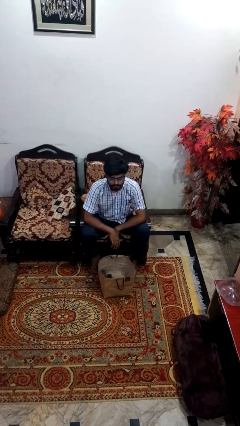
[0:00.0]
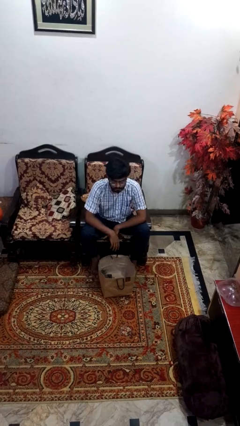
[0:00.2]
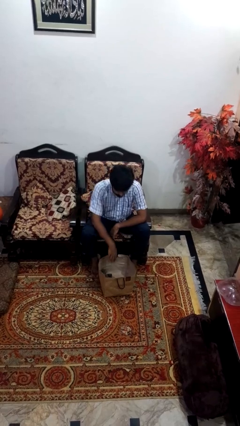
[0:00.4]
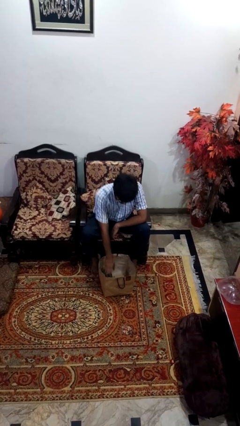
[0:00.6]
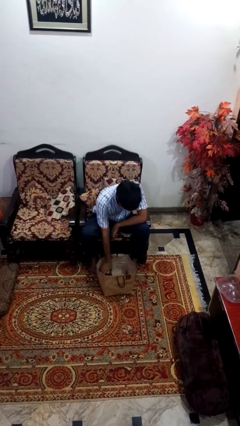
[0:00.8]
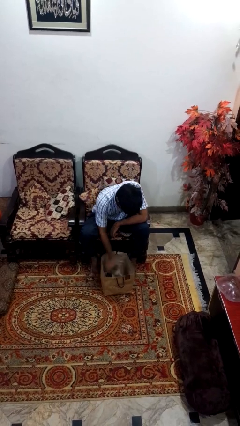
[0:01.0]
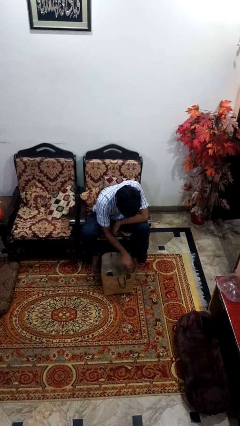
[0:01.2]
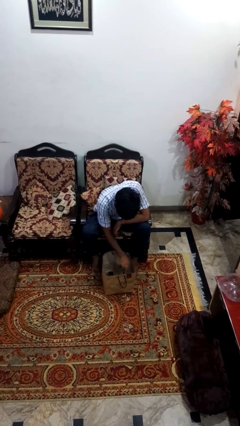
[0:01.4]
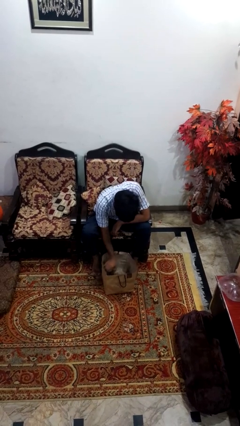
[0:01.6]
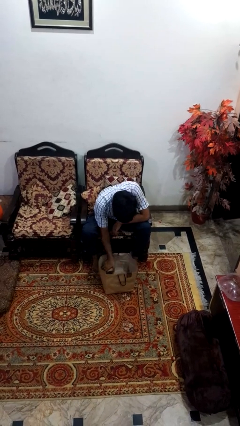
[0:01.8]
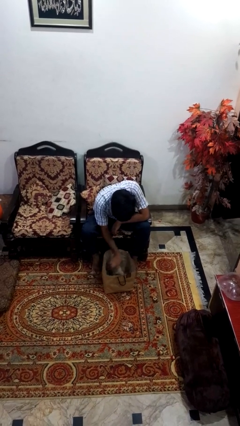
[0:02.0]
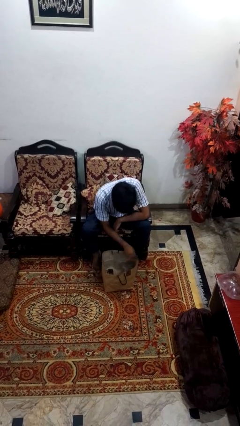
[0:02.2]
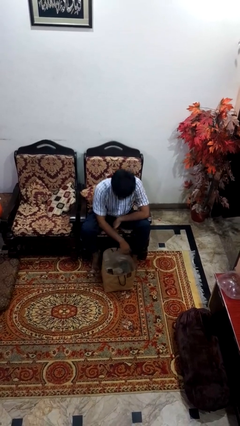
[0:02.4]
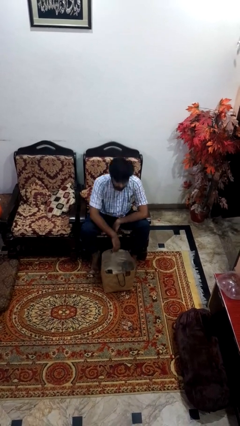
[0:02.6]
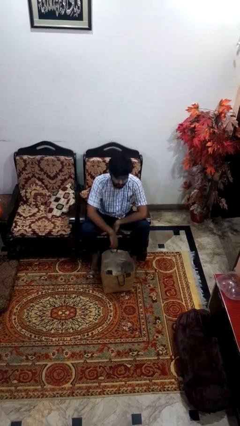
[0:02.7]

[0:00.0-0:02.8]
person searches in bag

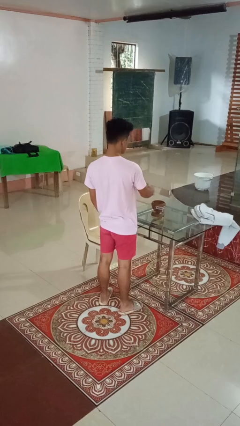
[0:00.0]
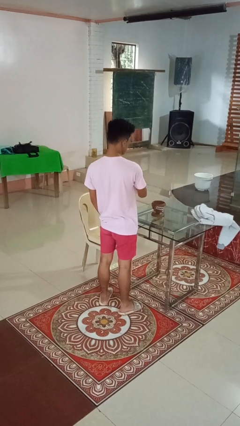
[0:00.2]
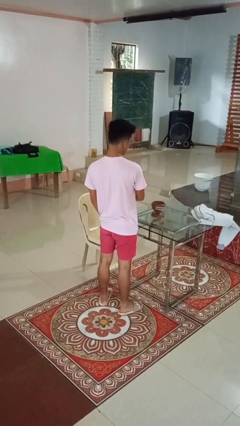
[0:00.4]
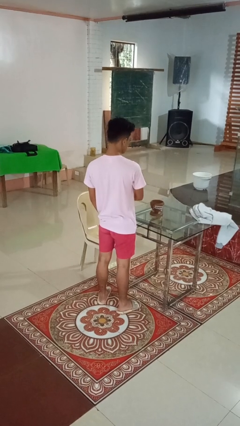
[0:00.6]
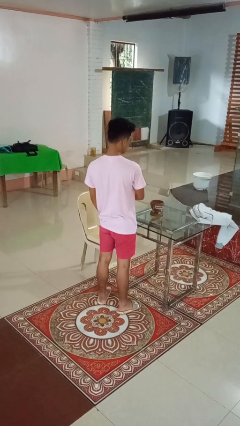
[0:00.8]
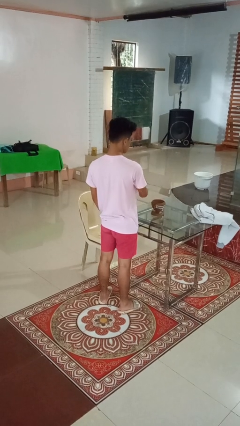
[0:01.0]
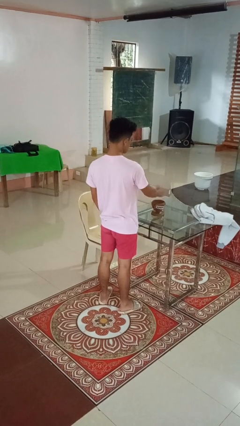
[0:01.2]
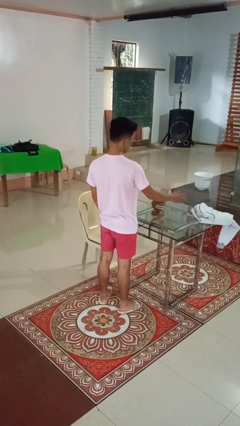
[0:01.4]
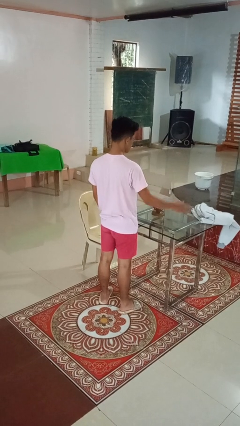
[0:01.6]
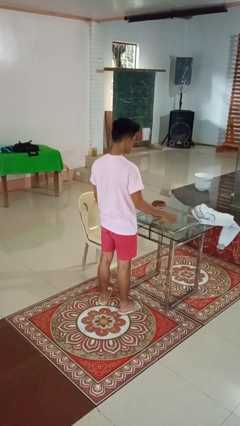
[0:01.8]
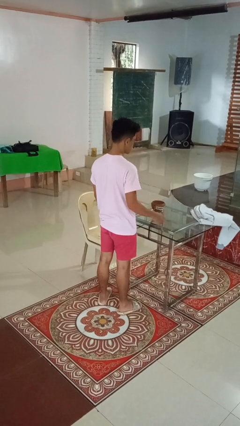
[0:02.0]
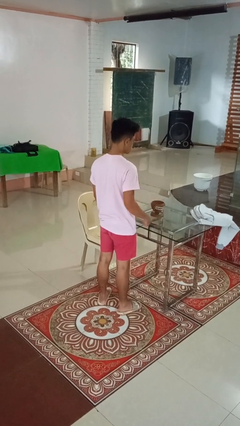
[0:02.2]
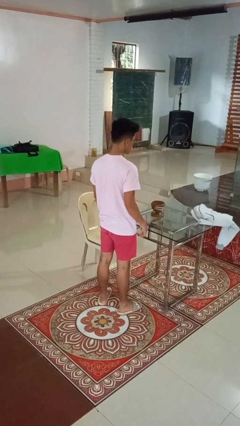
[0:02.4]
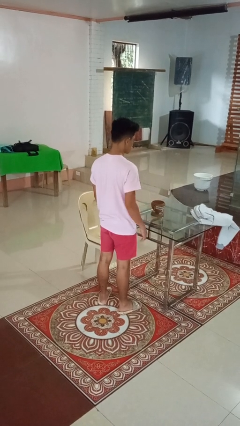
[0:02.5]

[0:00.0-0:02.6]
person waves hand over object

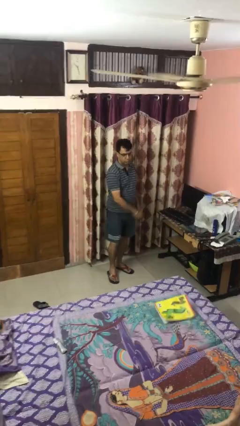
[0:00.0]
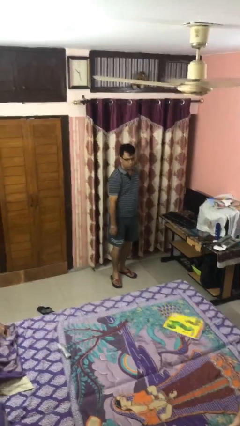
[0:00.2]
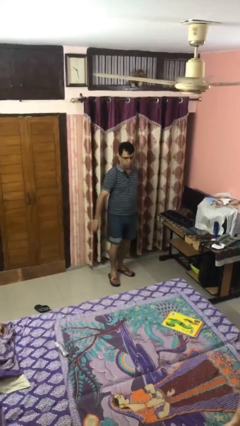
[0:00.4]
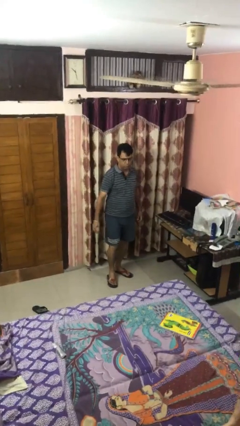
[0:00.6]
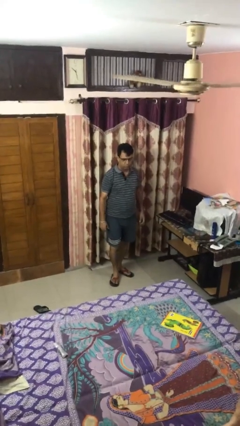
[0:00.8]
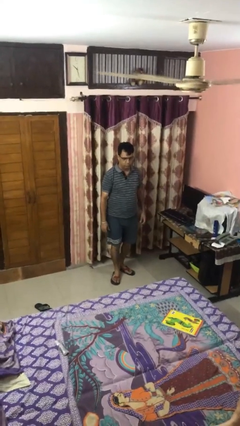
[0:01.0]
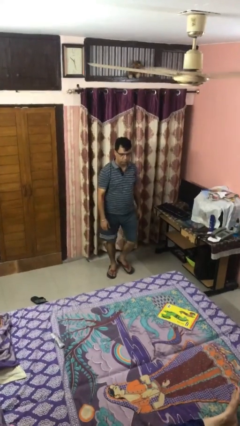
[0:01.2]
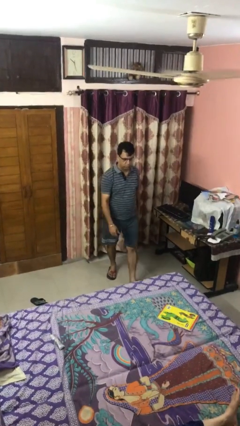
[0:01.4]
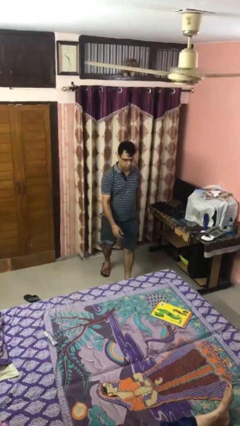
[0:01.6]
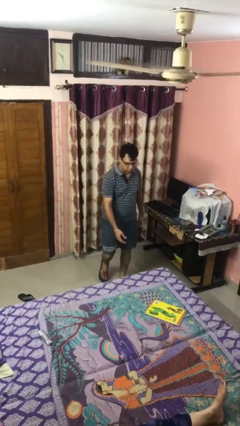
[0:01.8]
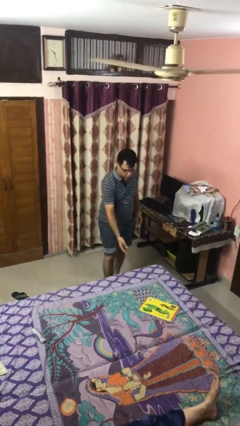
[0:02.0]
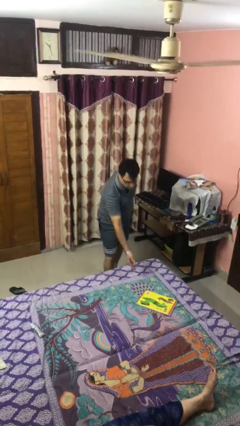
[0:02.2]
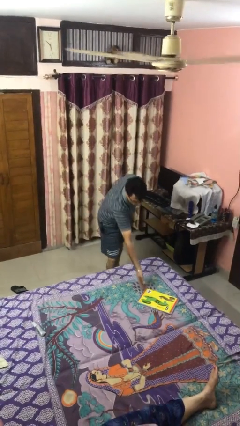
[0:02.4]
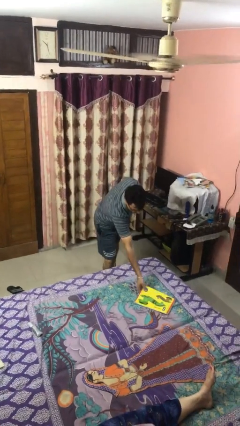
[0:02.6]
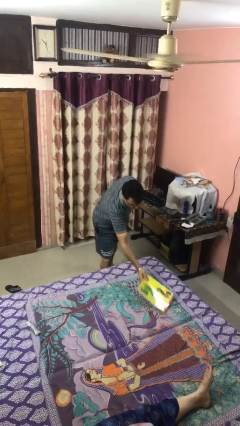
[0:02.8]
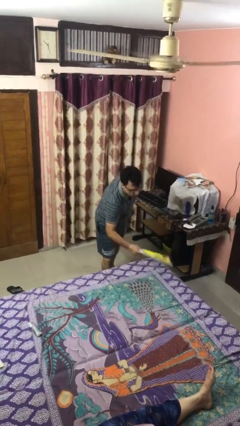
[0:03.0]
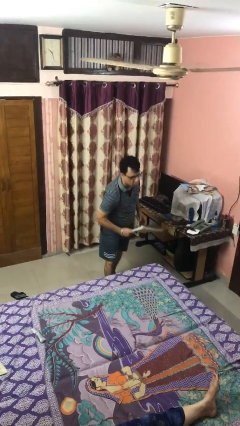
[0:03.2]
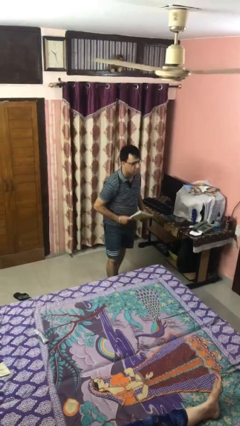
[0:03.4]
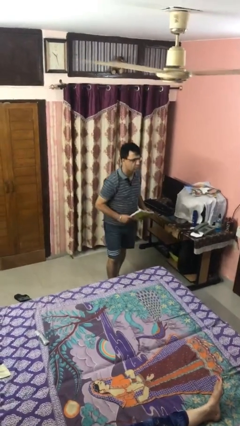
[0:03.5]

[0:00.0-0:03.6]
person picks up object from bed

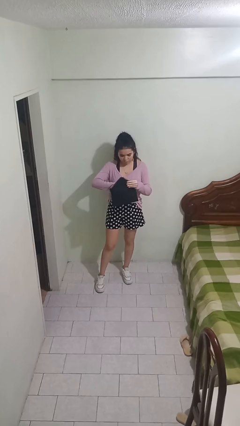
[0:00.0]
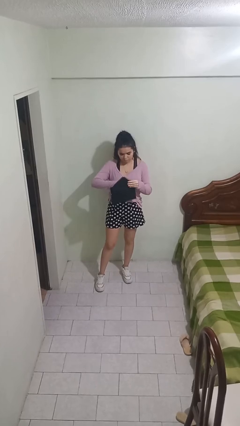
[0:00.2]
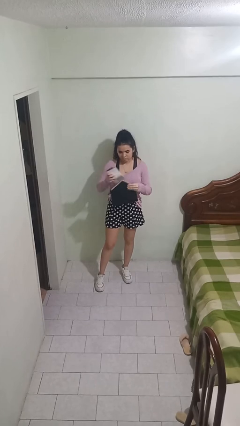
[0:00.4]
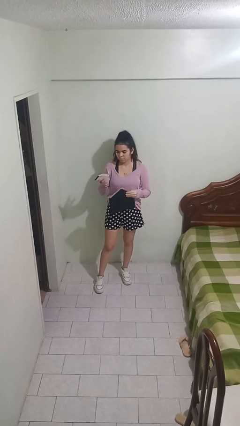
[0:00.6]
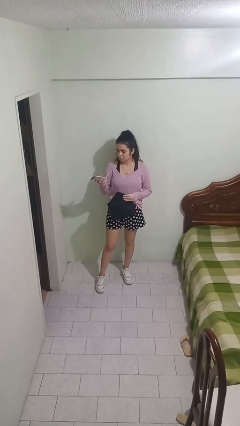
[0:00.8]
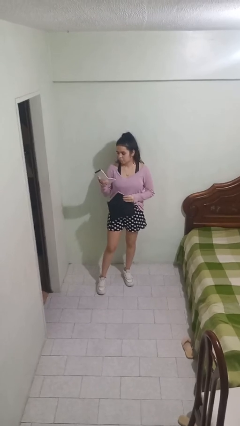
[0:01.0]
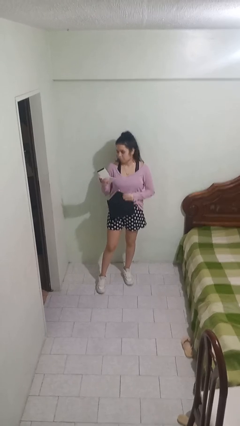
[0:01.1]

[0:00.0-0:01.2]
person takes object from purse

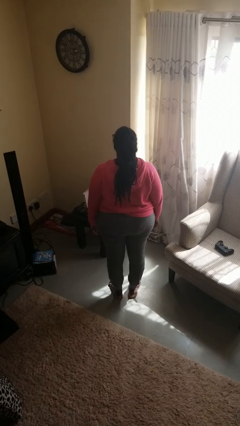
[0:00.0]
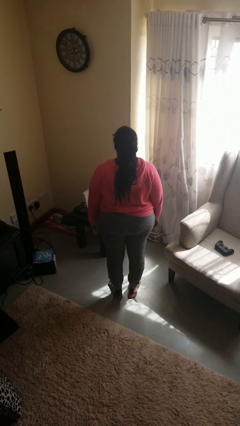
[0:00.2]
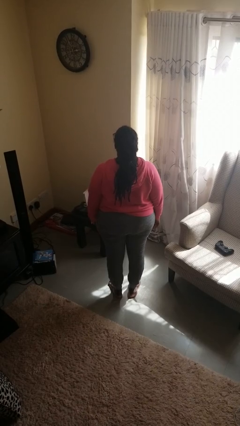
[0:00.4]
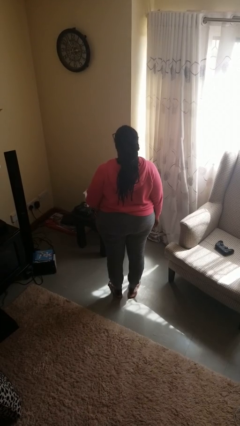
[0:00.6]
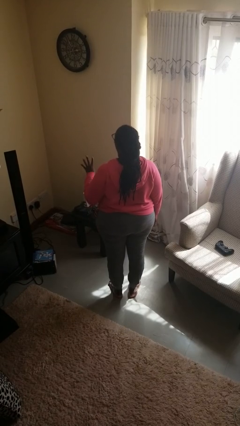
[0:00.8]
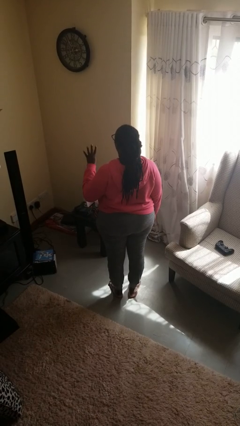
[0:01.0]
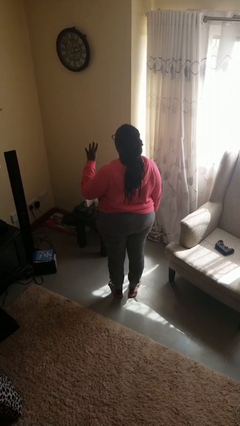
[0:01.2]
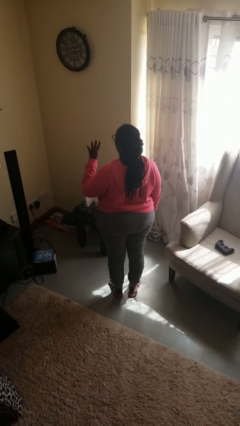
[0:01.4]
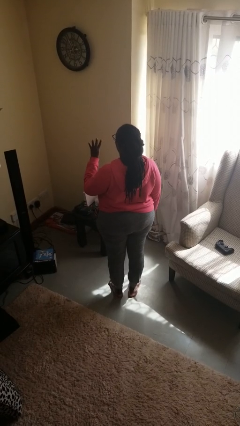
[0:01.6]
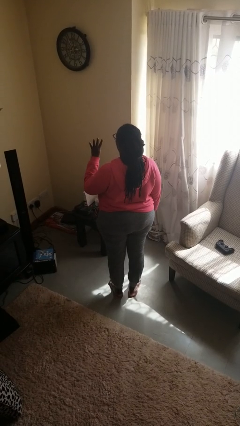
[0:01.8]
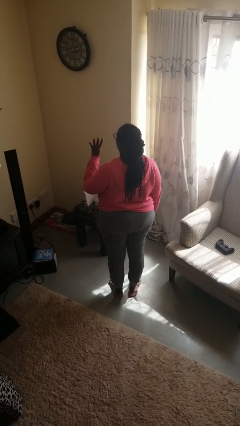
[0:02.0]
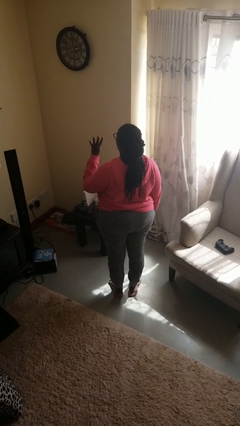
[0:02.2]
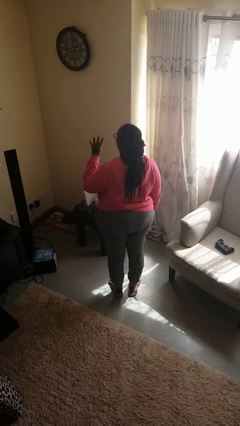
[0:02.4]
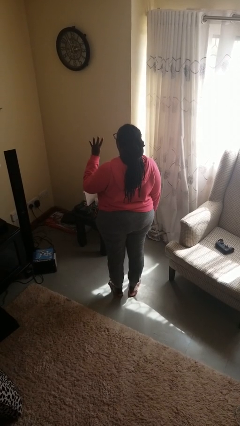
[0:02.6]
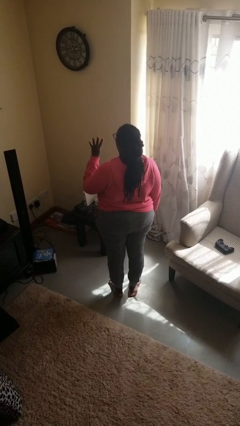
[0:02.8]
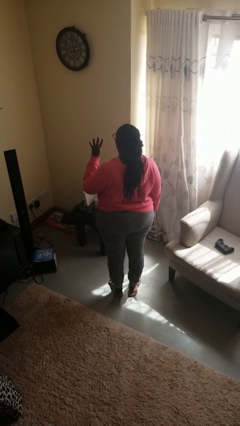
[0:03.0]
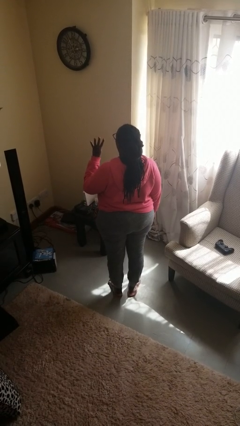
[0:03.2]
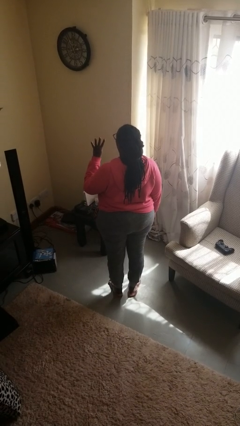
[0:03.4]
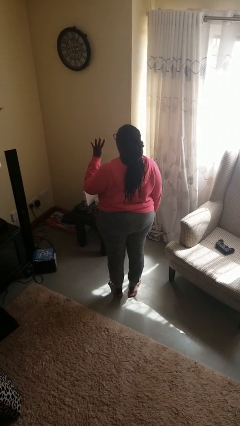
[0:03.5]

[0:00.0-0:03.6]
person gestures number four

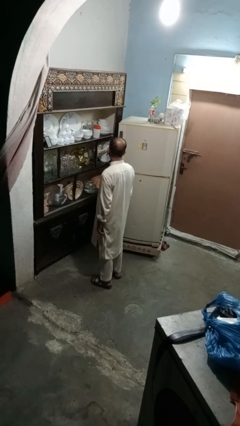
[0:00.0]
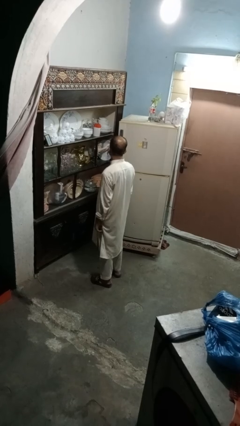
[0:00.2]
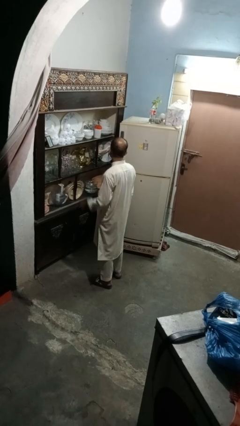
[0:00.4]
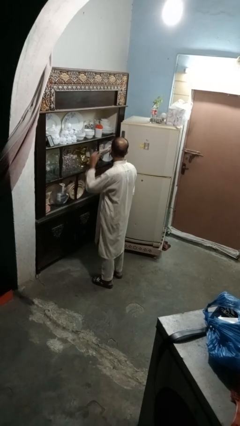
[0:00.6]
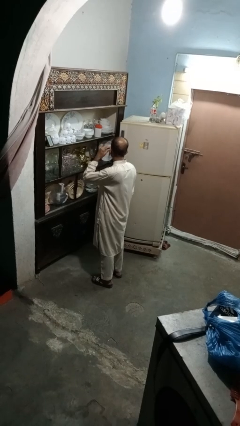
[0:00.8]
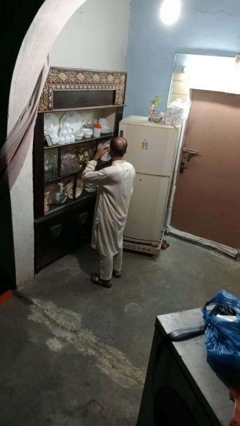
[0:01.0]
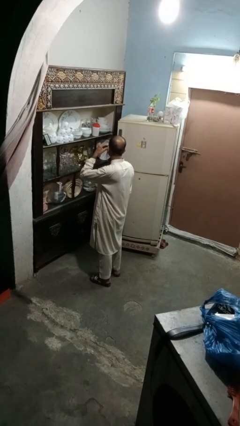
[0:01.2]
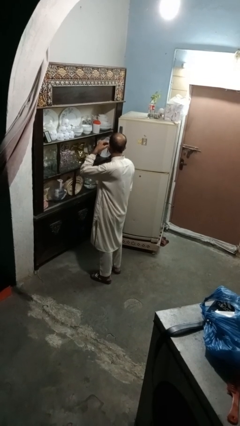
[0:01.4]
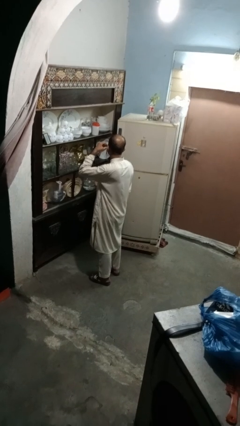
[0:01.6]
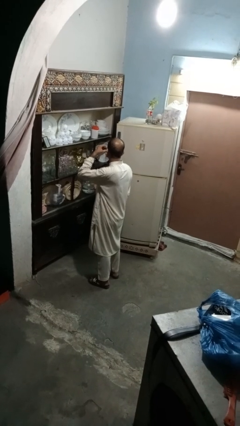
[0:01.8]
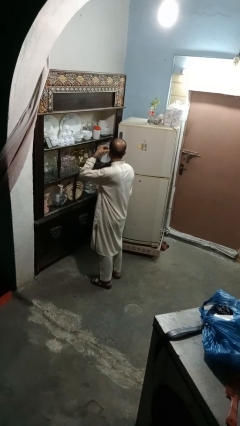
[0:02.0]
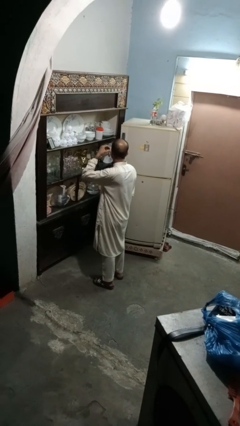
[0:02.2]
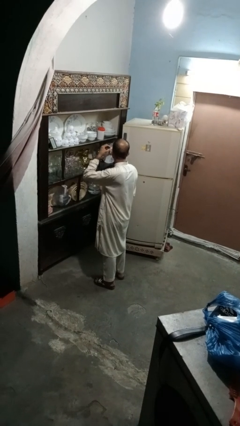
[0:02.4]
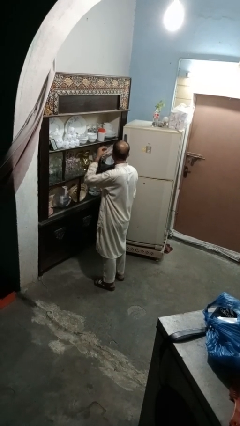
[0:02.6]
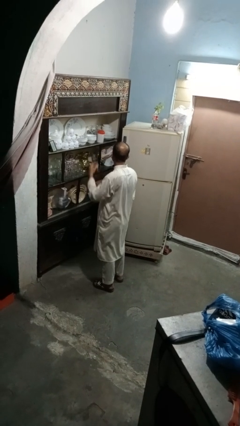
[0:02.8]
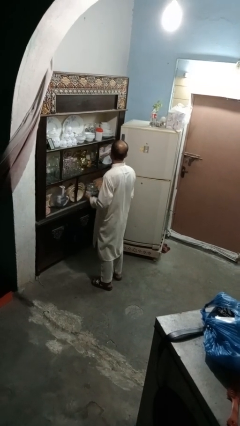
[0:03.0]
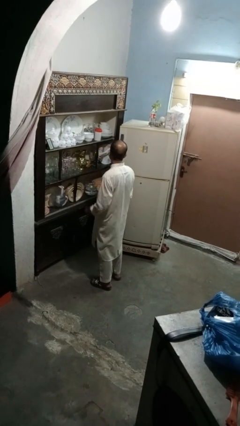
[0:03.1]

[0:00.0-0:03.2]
person takes off earrings
